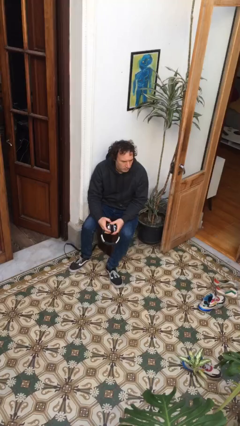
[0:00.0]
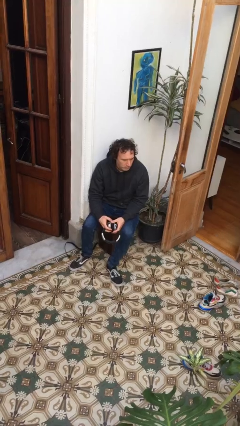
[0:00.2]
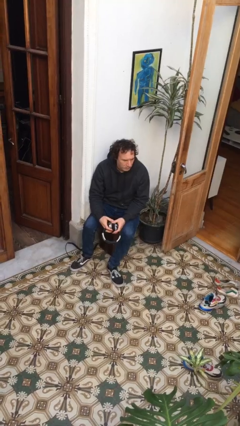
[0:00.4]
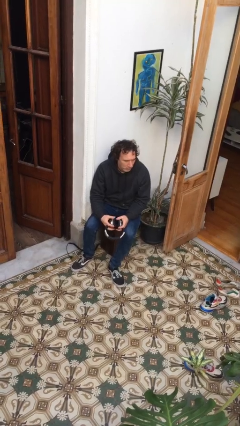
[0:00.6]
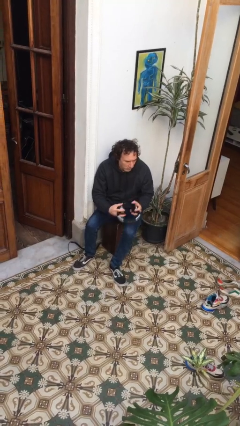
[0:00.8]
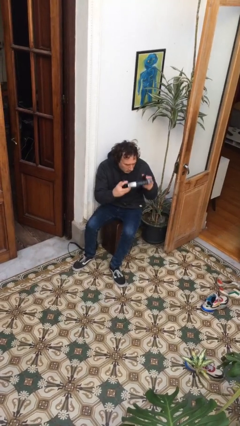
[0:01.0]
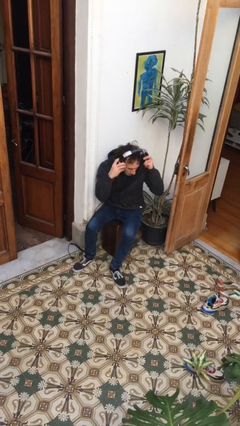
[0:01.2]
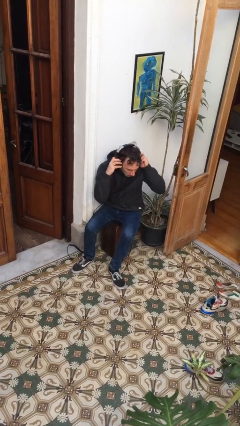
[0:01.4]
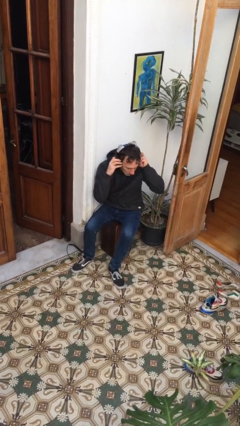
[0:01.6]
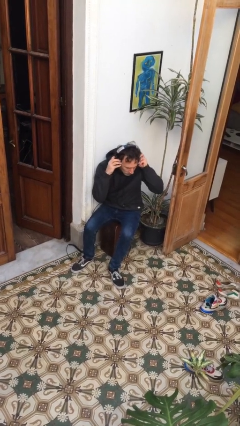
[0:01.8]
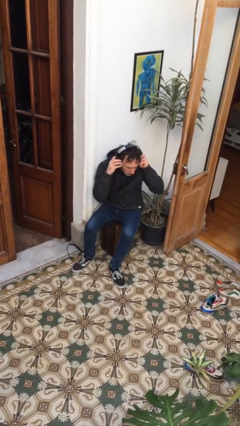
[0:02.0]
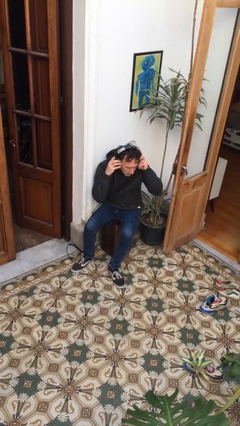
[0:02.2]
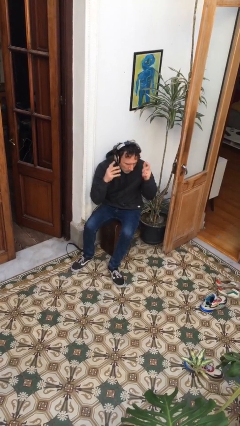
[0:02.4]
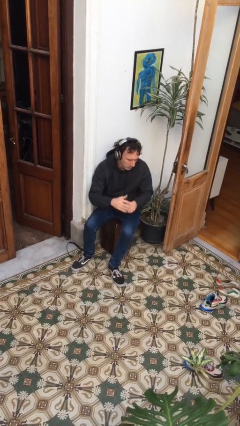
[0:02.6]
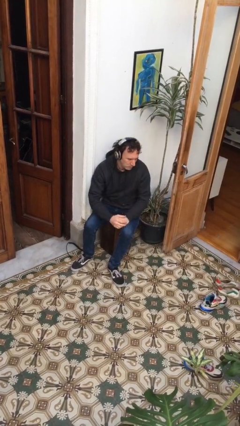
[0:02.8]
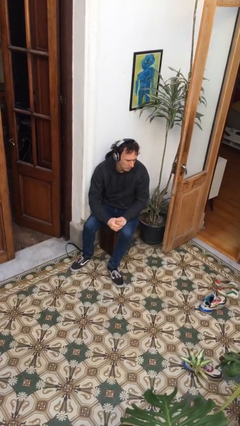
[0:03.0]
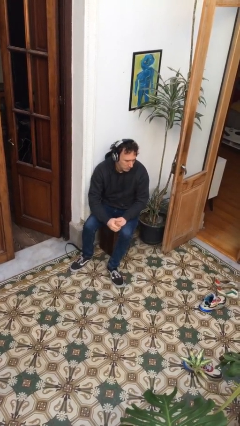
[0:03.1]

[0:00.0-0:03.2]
person puts on headphones

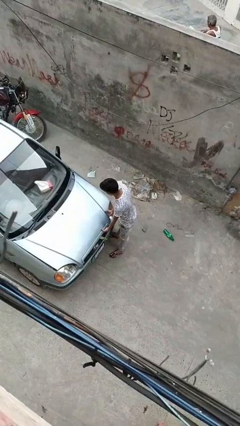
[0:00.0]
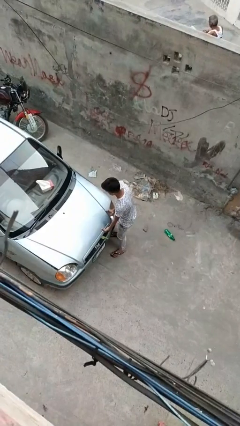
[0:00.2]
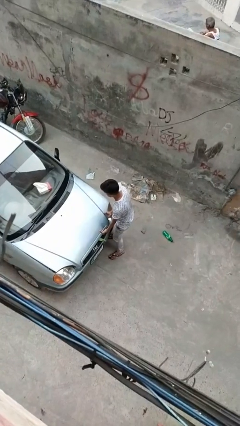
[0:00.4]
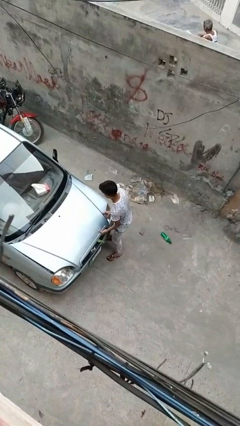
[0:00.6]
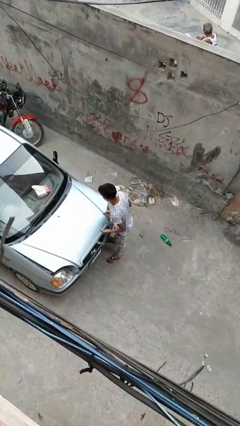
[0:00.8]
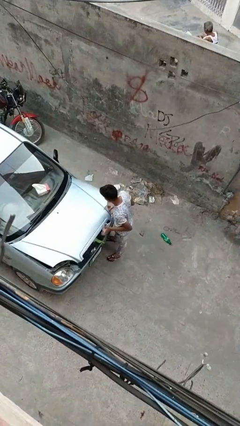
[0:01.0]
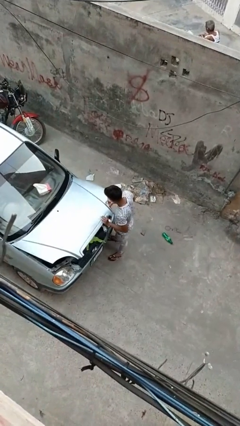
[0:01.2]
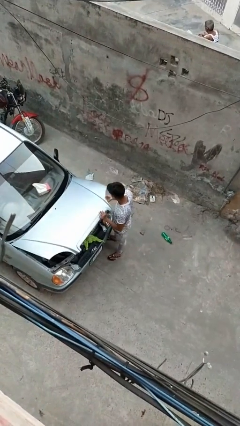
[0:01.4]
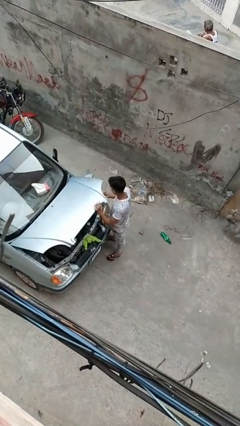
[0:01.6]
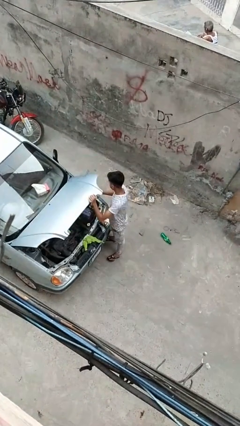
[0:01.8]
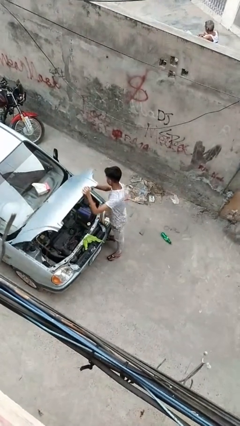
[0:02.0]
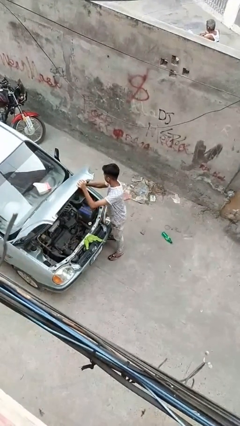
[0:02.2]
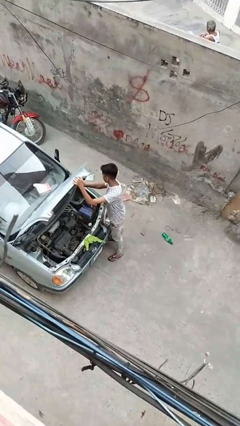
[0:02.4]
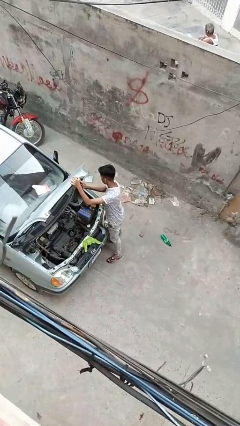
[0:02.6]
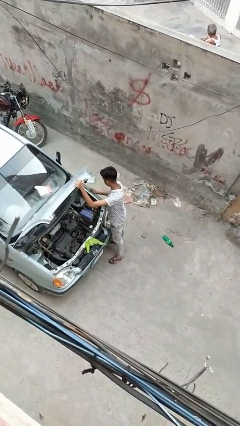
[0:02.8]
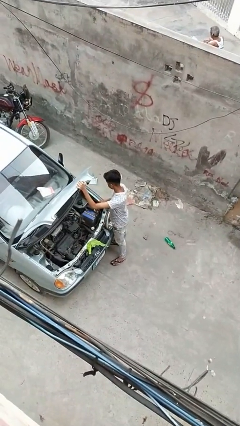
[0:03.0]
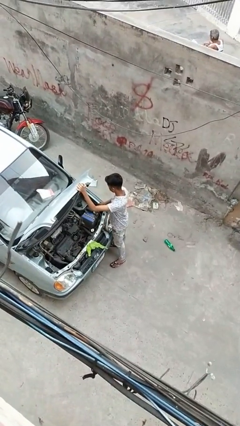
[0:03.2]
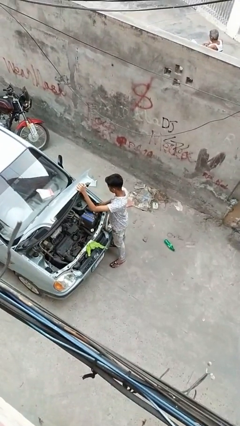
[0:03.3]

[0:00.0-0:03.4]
person opens car hood

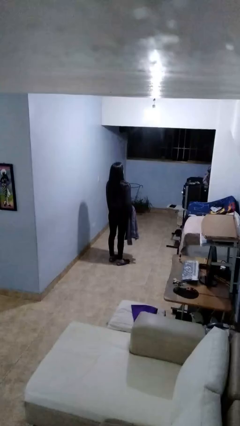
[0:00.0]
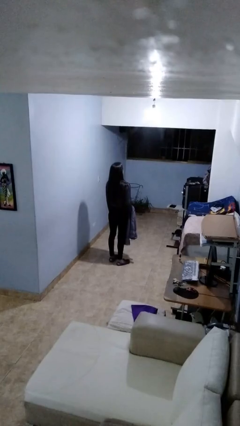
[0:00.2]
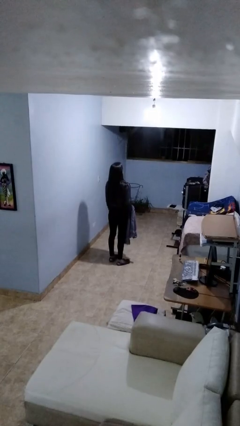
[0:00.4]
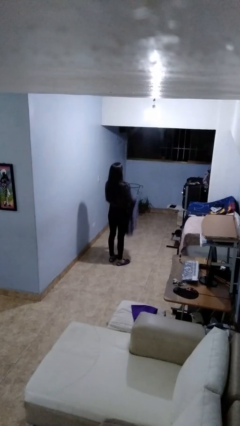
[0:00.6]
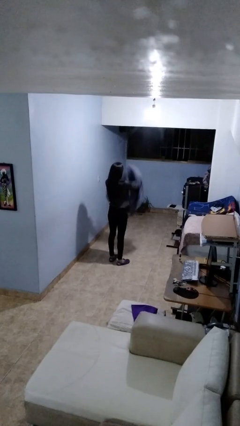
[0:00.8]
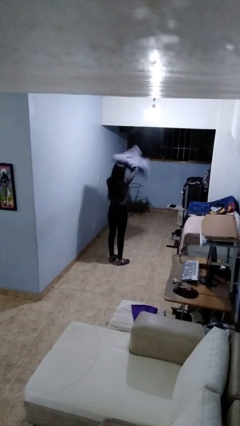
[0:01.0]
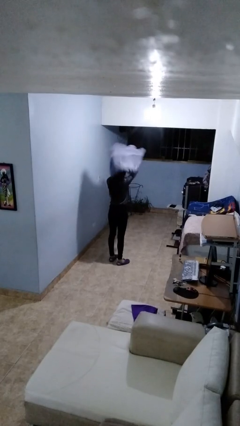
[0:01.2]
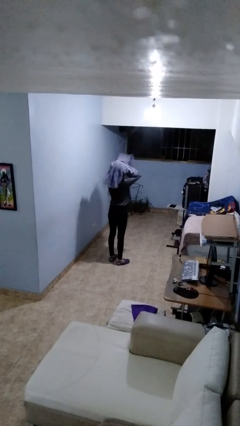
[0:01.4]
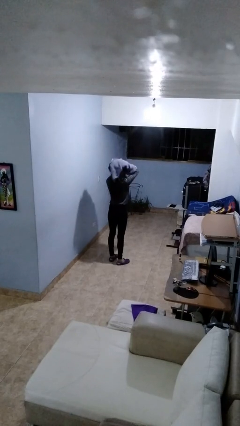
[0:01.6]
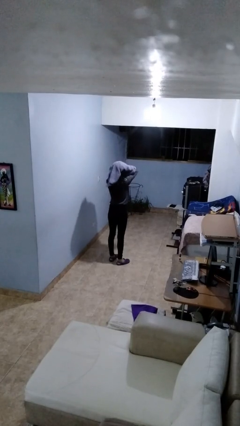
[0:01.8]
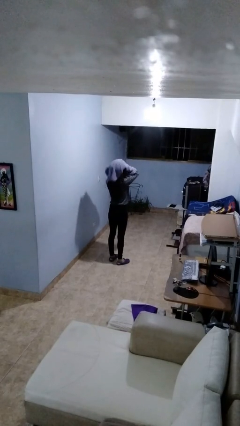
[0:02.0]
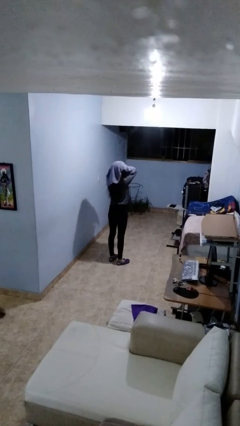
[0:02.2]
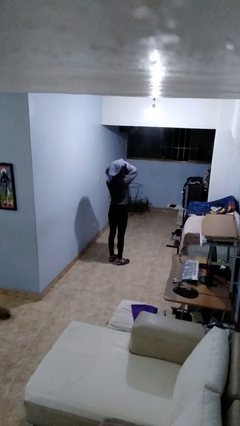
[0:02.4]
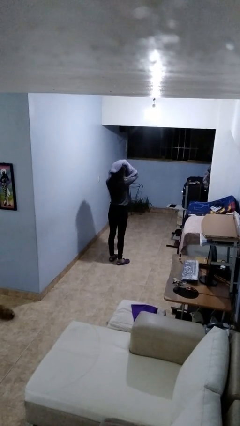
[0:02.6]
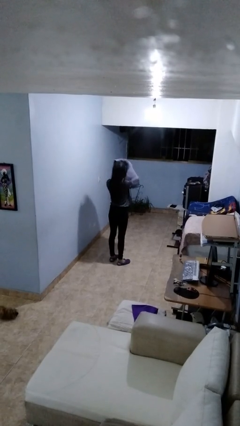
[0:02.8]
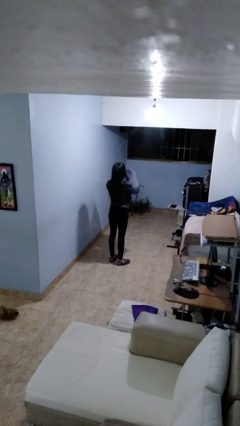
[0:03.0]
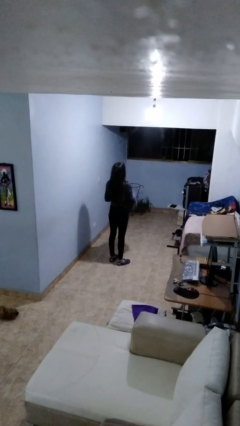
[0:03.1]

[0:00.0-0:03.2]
person dries hair with towel

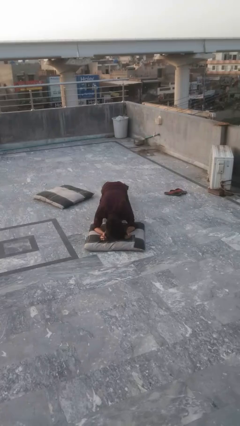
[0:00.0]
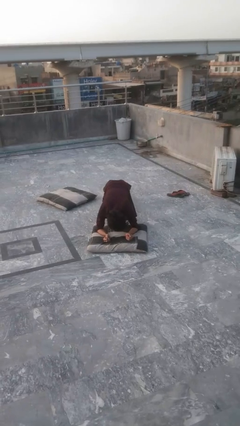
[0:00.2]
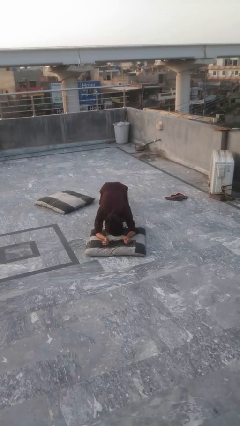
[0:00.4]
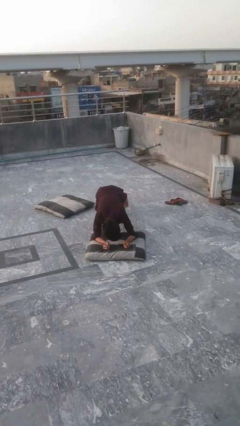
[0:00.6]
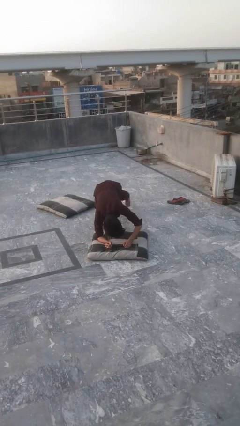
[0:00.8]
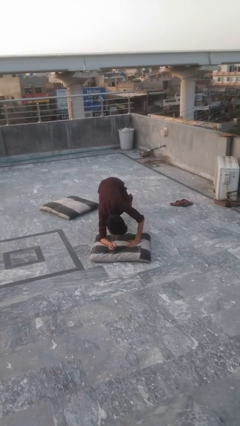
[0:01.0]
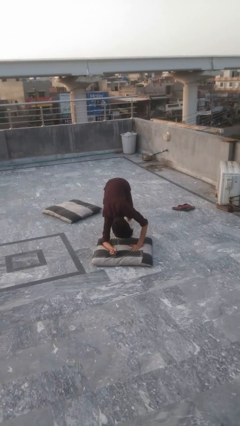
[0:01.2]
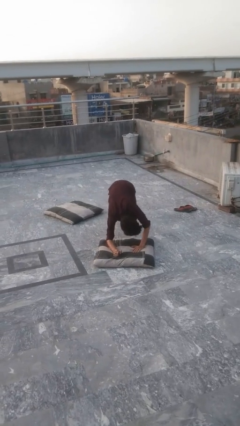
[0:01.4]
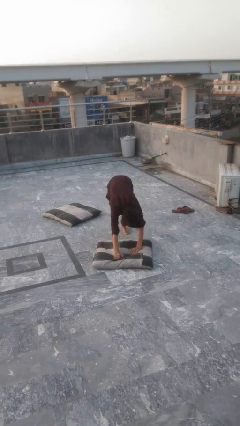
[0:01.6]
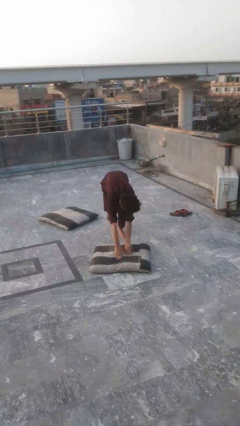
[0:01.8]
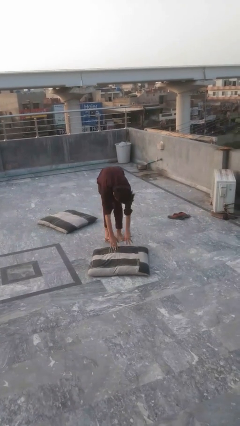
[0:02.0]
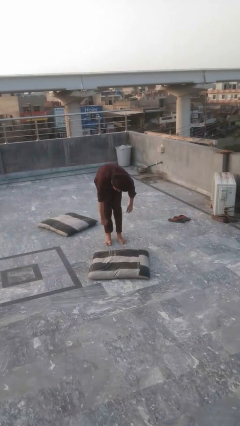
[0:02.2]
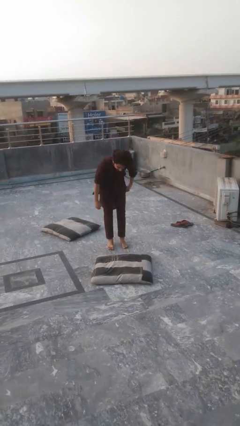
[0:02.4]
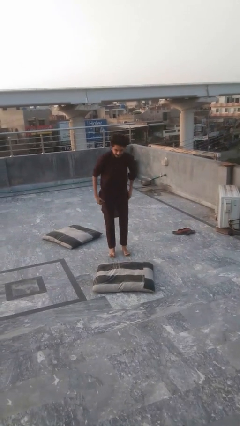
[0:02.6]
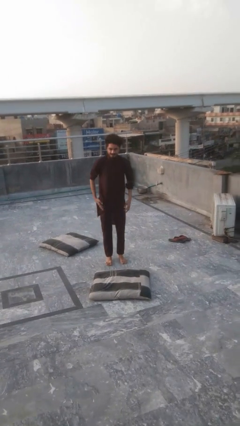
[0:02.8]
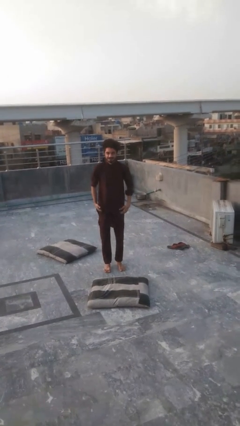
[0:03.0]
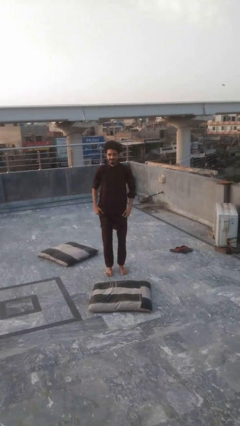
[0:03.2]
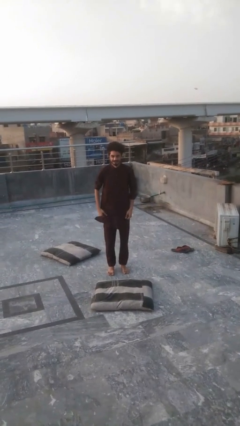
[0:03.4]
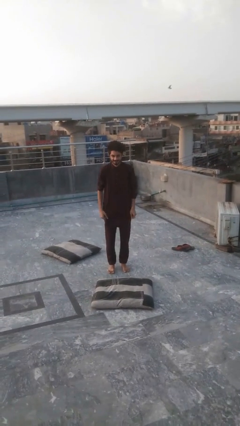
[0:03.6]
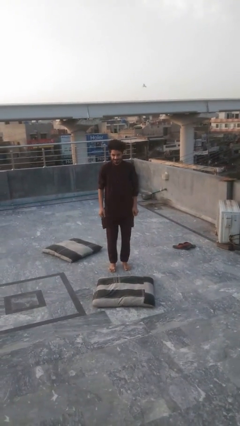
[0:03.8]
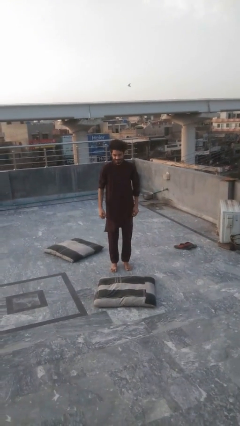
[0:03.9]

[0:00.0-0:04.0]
person stands up from floor

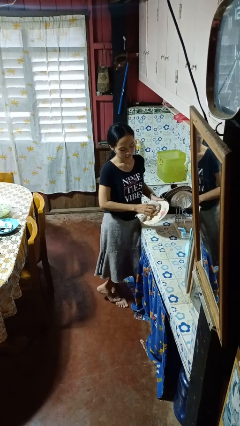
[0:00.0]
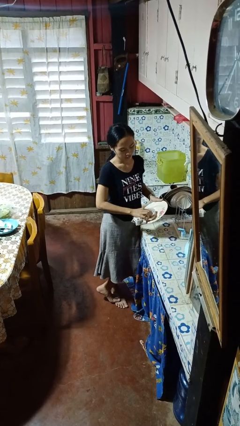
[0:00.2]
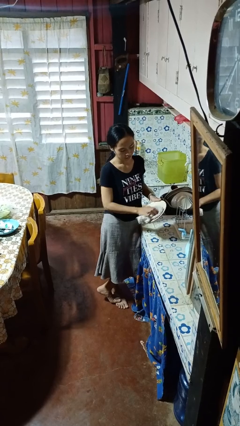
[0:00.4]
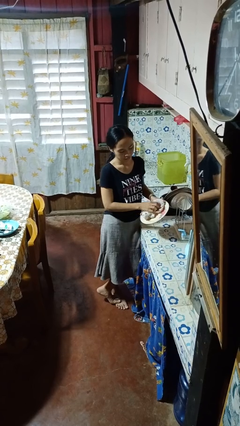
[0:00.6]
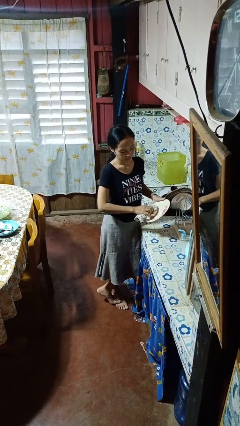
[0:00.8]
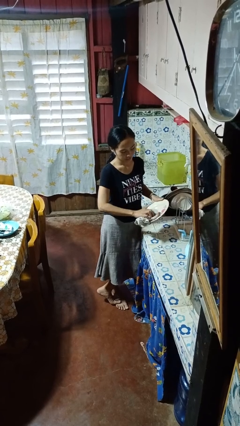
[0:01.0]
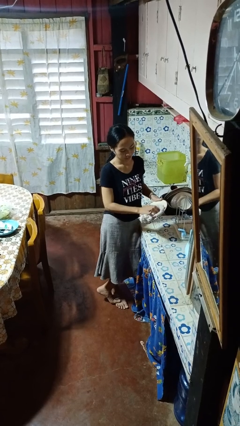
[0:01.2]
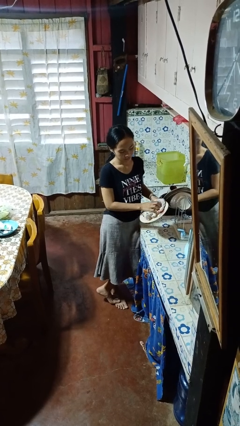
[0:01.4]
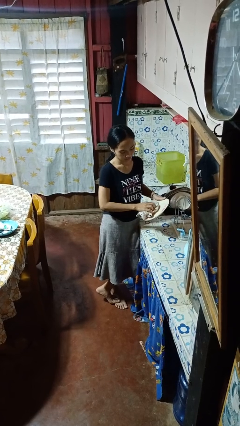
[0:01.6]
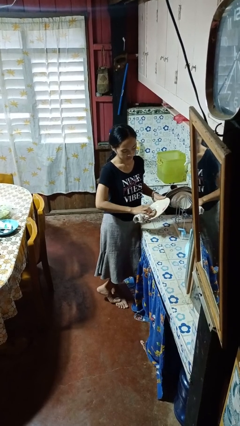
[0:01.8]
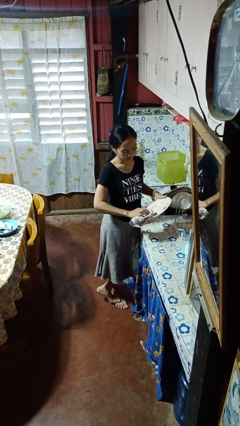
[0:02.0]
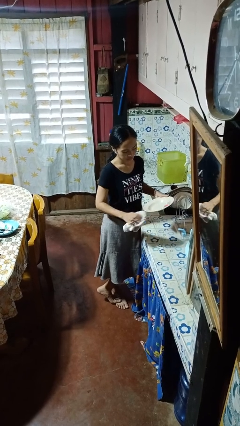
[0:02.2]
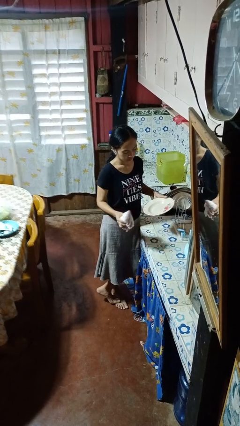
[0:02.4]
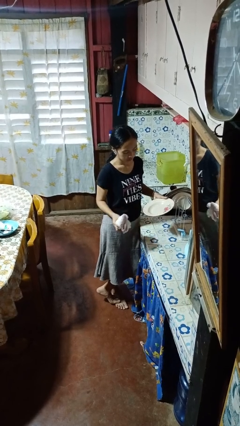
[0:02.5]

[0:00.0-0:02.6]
person dries dish

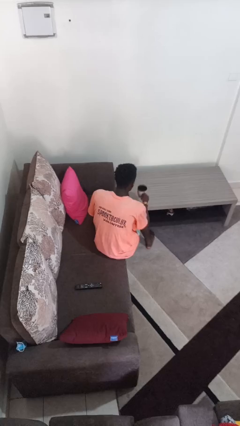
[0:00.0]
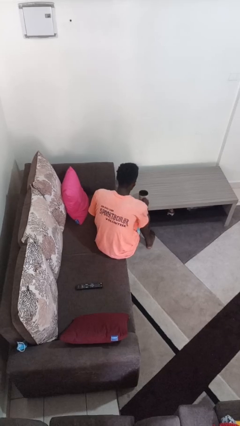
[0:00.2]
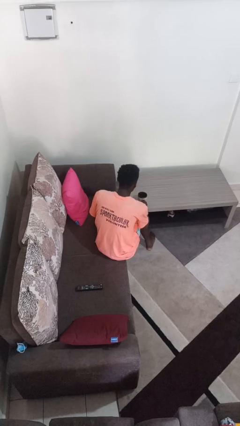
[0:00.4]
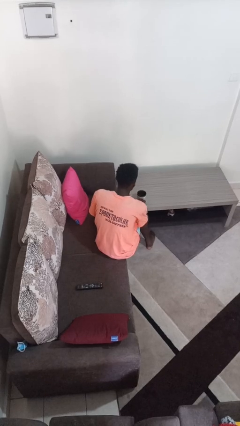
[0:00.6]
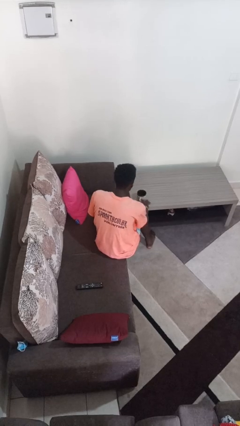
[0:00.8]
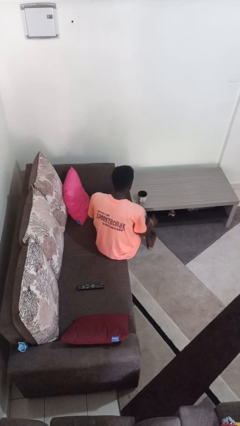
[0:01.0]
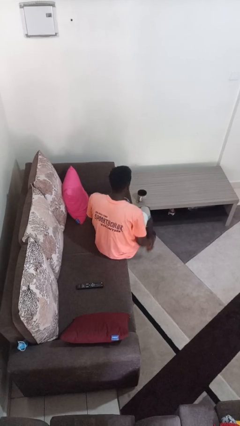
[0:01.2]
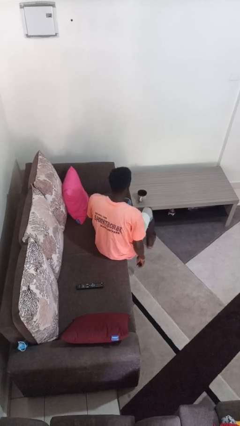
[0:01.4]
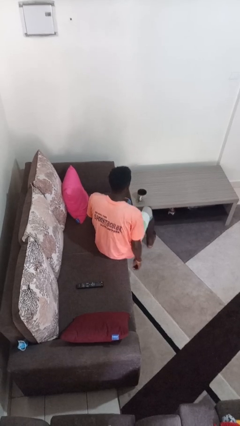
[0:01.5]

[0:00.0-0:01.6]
person puts down object on table
